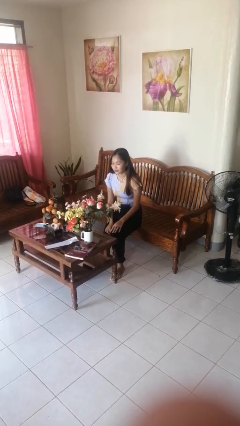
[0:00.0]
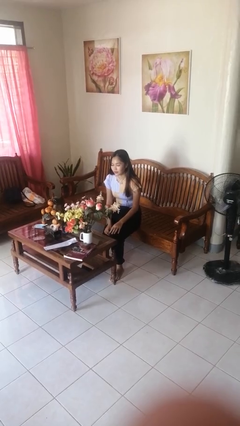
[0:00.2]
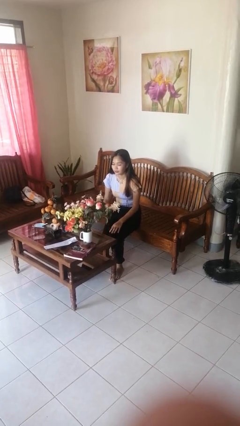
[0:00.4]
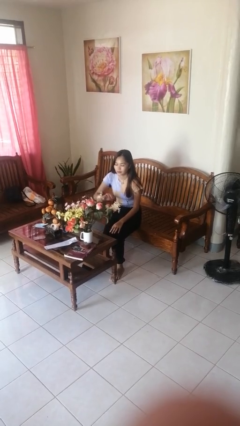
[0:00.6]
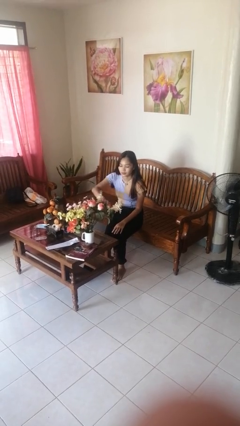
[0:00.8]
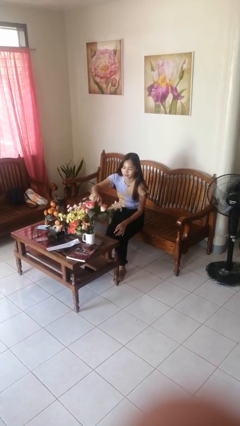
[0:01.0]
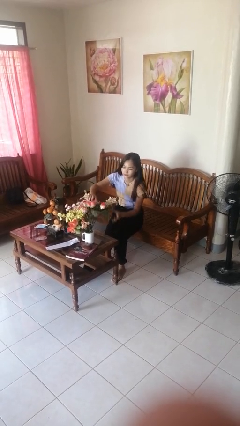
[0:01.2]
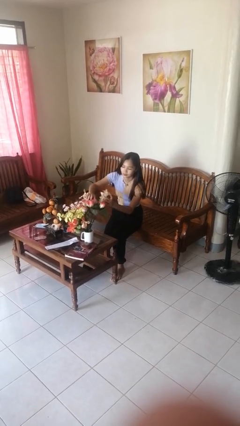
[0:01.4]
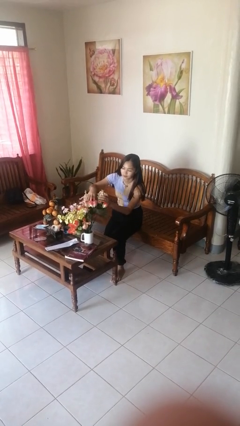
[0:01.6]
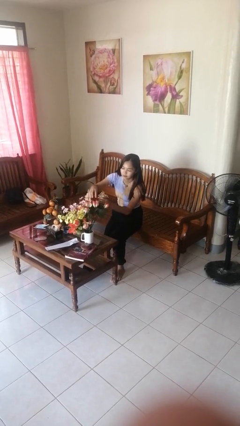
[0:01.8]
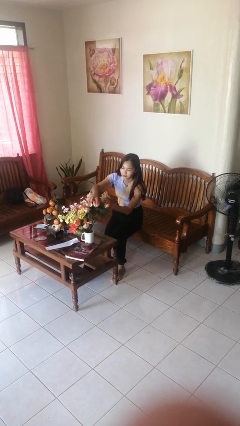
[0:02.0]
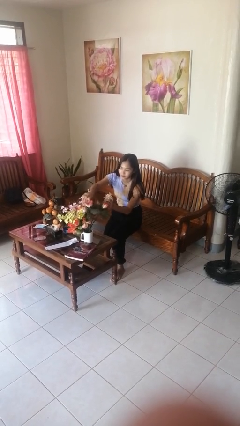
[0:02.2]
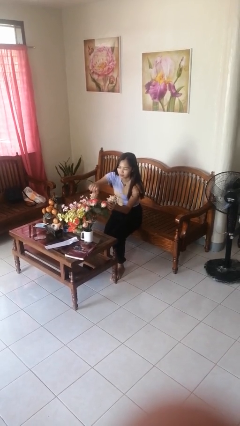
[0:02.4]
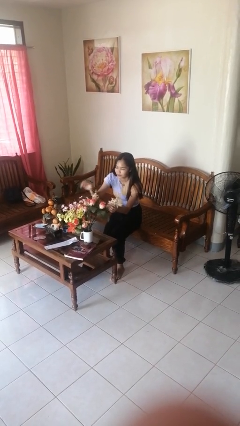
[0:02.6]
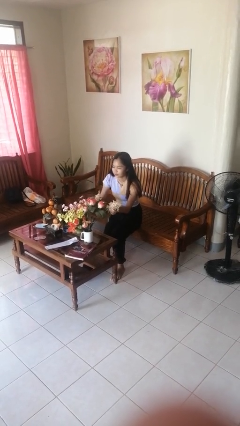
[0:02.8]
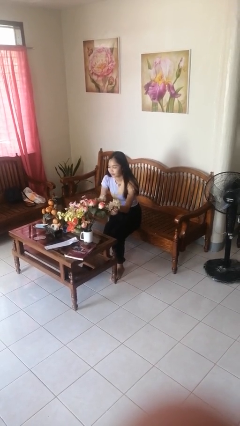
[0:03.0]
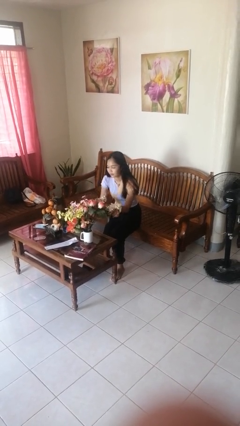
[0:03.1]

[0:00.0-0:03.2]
person arranges flowers in vase

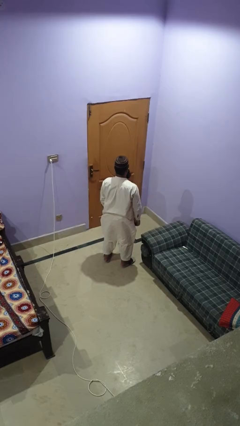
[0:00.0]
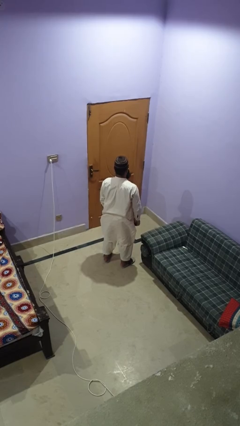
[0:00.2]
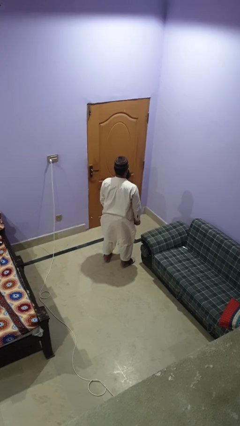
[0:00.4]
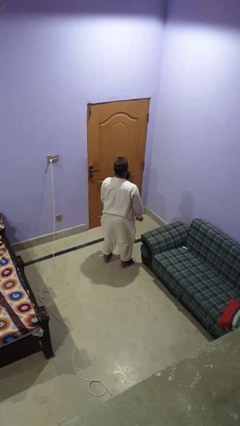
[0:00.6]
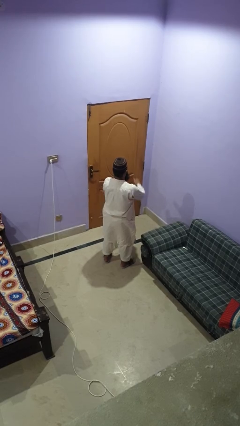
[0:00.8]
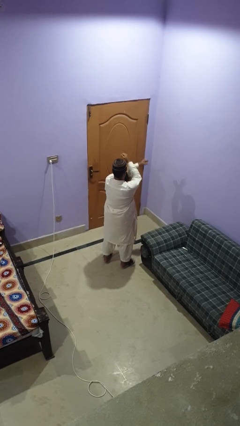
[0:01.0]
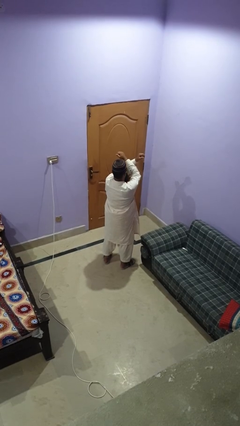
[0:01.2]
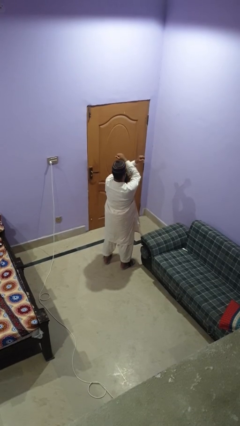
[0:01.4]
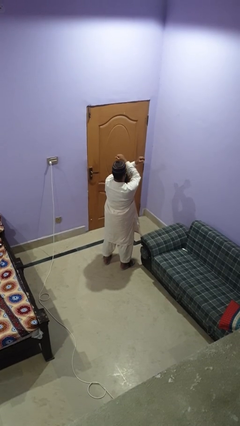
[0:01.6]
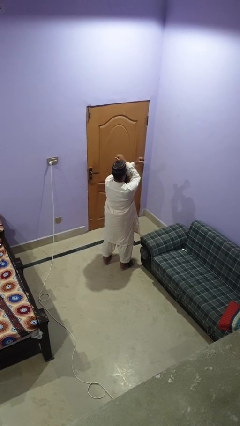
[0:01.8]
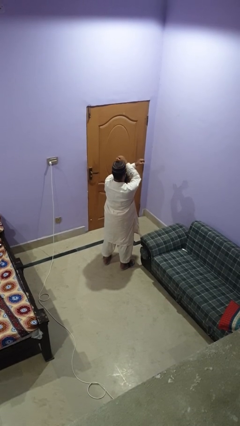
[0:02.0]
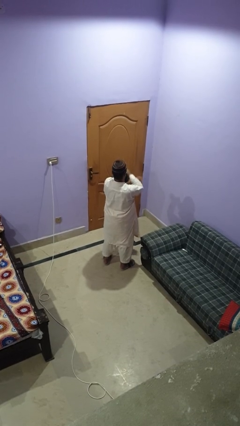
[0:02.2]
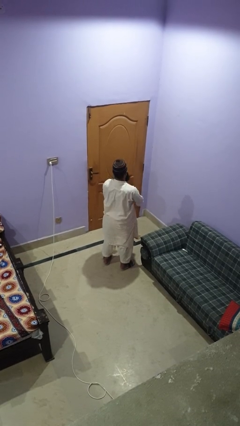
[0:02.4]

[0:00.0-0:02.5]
person gestures arms x

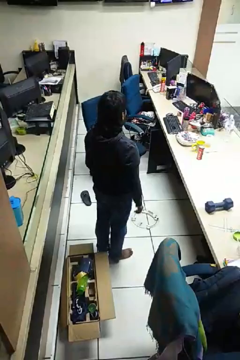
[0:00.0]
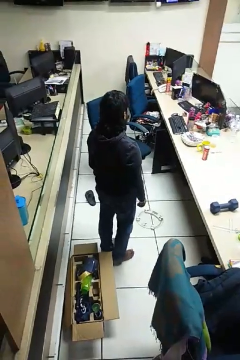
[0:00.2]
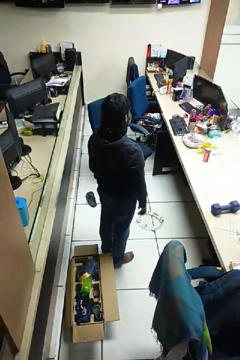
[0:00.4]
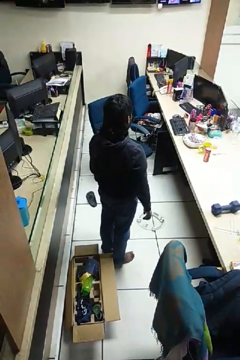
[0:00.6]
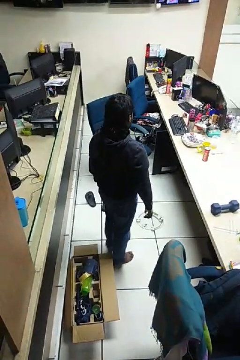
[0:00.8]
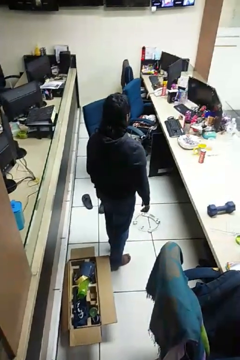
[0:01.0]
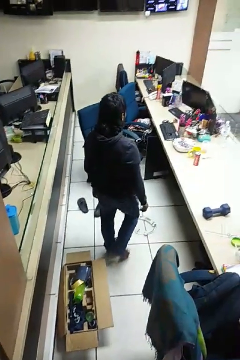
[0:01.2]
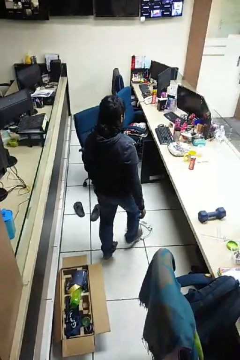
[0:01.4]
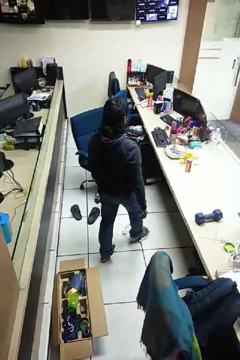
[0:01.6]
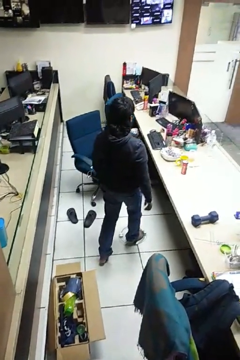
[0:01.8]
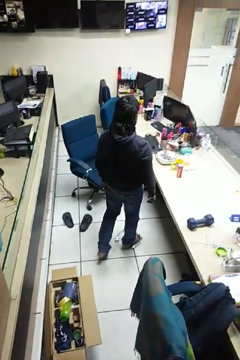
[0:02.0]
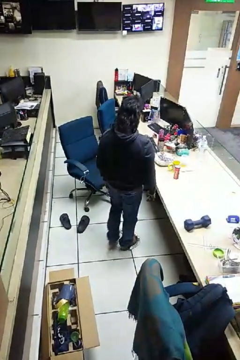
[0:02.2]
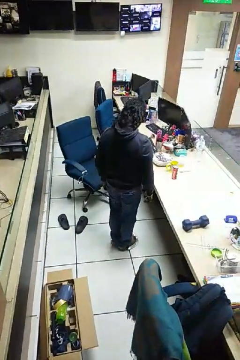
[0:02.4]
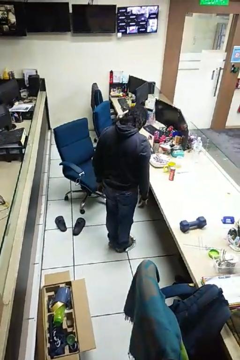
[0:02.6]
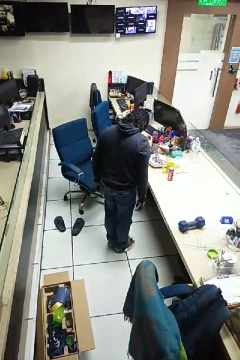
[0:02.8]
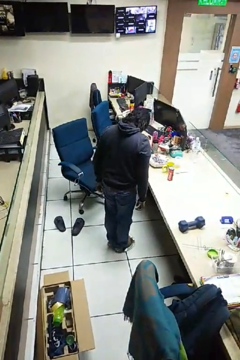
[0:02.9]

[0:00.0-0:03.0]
person uses bodyweight scale

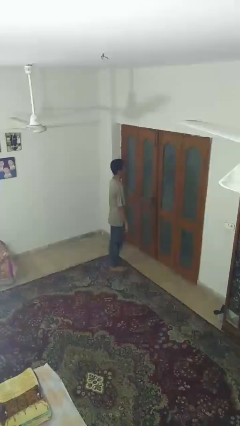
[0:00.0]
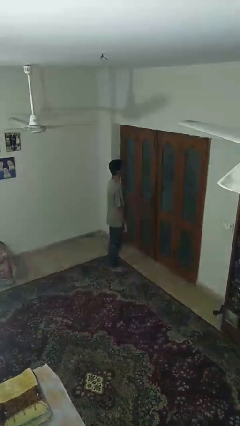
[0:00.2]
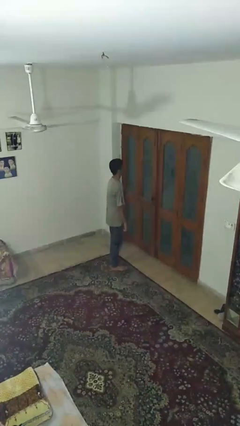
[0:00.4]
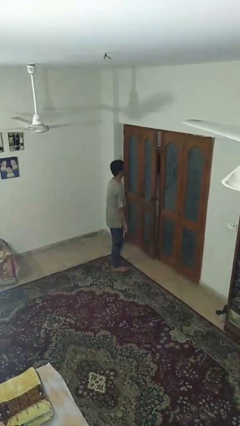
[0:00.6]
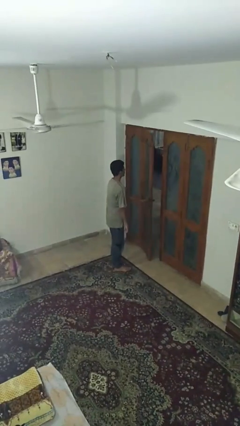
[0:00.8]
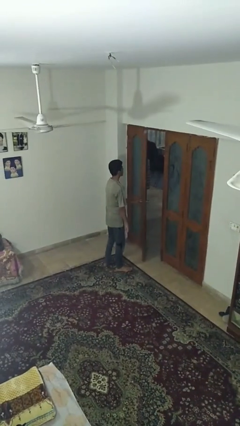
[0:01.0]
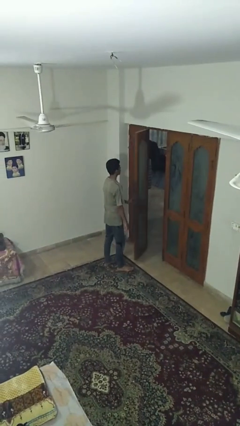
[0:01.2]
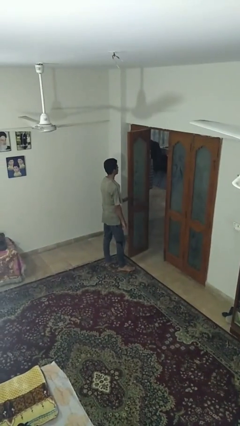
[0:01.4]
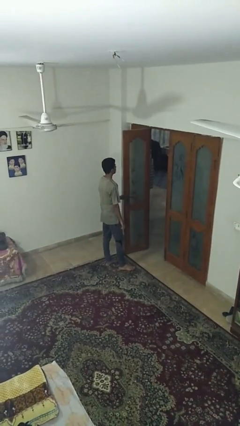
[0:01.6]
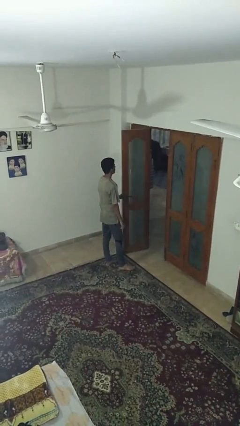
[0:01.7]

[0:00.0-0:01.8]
person opens facility door

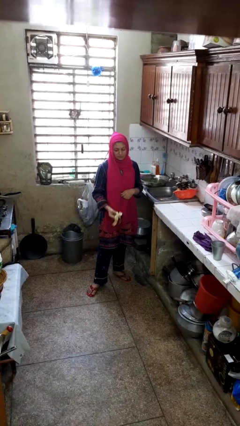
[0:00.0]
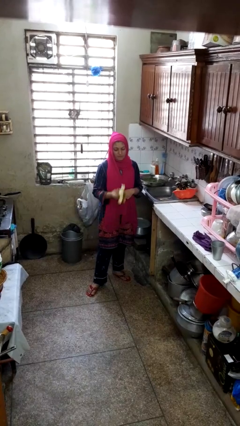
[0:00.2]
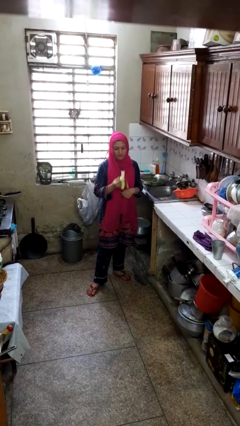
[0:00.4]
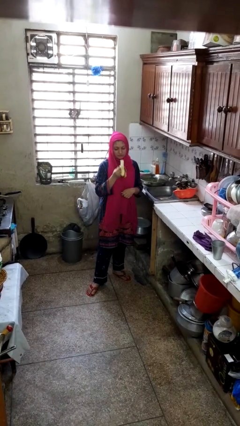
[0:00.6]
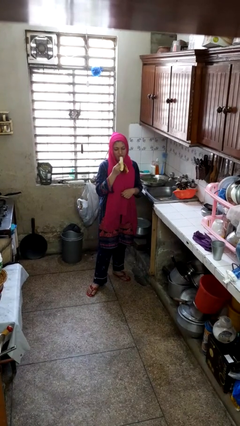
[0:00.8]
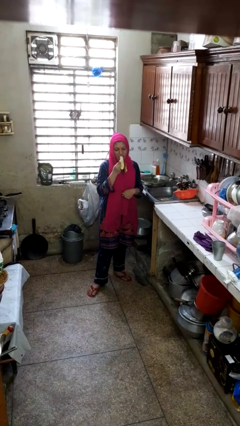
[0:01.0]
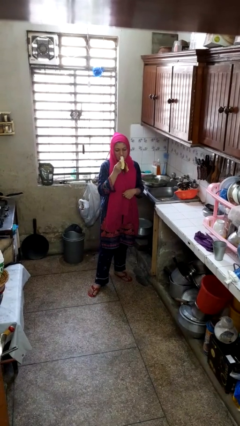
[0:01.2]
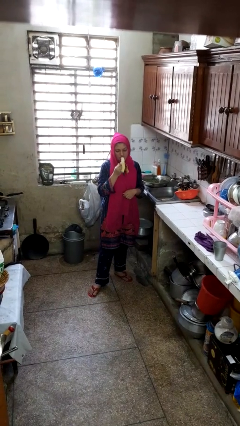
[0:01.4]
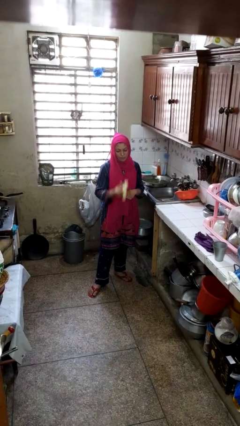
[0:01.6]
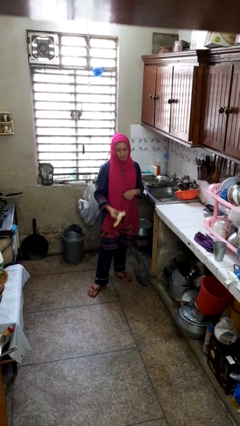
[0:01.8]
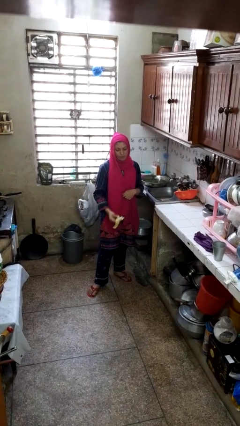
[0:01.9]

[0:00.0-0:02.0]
person eats banana

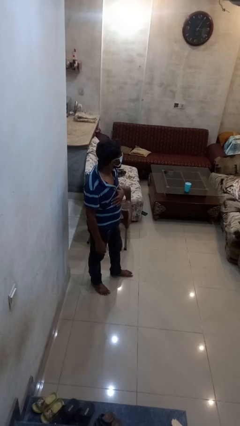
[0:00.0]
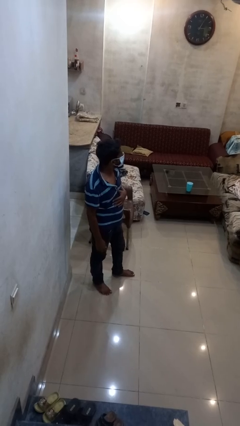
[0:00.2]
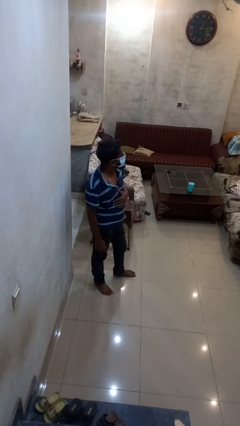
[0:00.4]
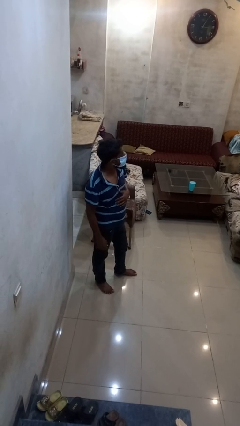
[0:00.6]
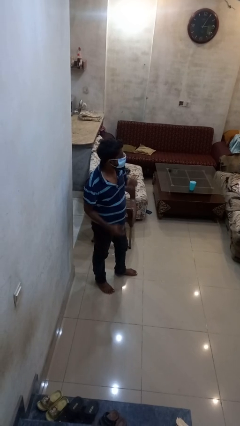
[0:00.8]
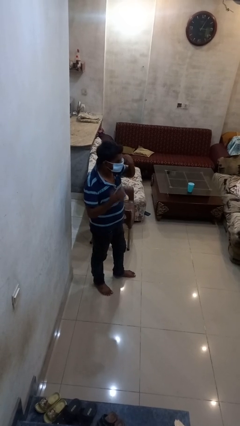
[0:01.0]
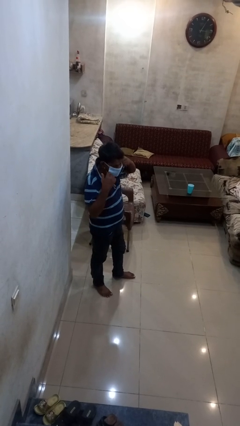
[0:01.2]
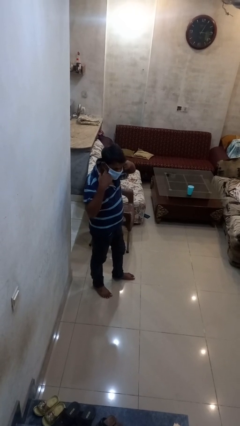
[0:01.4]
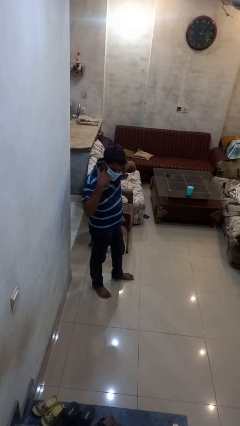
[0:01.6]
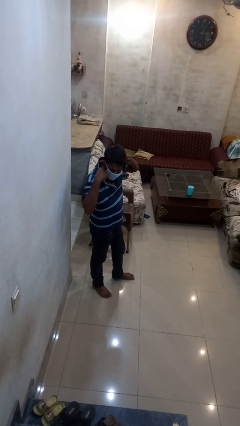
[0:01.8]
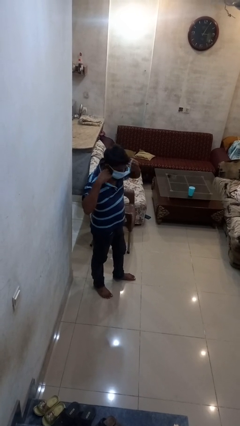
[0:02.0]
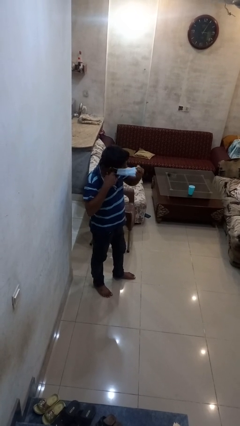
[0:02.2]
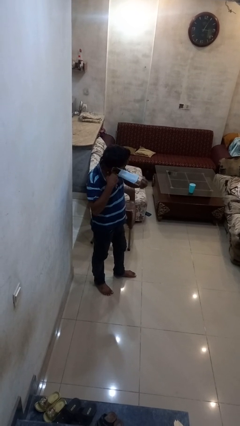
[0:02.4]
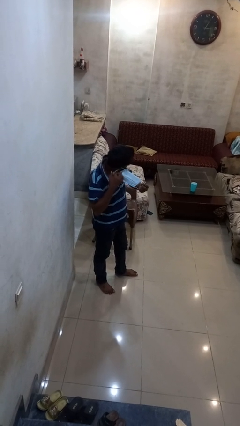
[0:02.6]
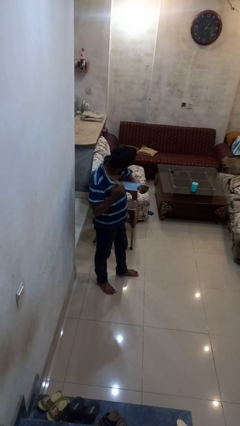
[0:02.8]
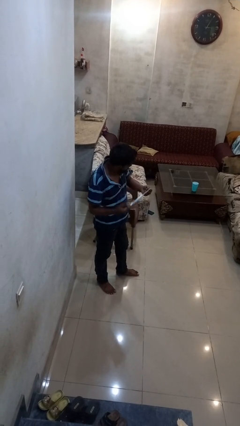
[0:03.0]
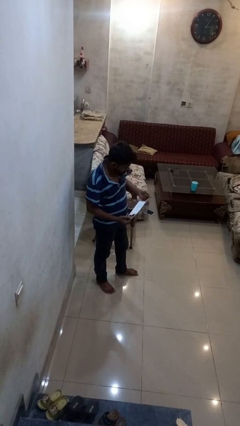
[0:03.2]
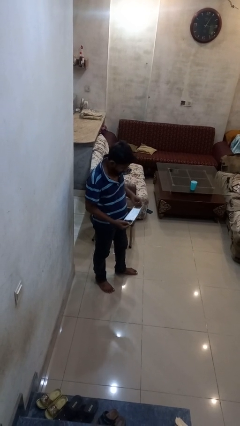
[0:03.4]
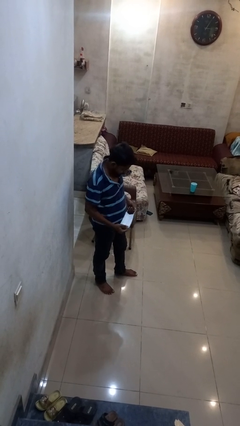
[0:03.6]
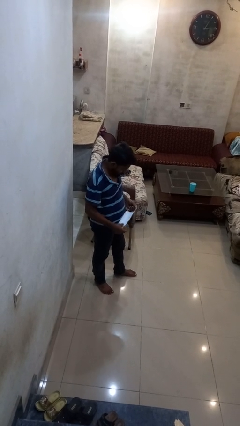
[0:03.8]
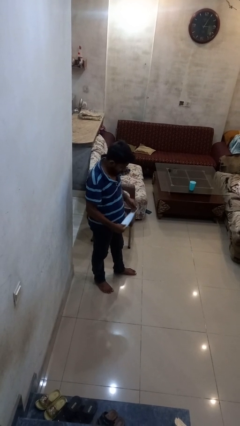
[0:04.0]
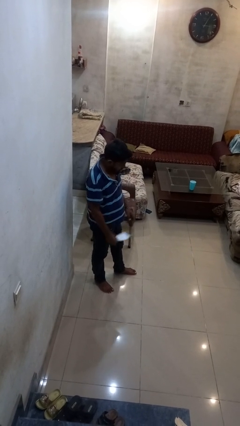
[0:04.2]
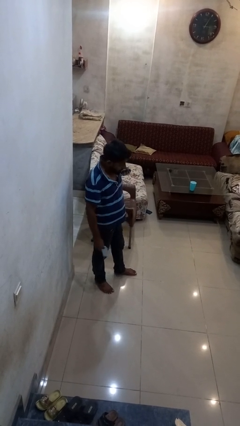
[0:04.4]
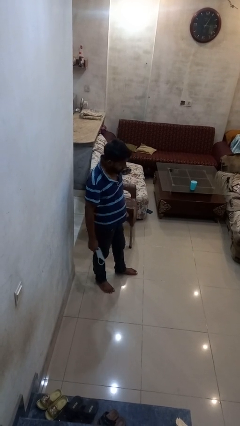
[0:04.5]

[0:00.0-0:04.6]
person takes off facemask

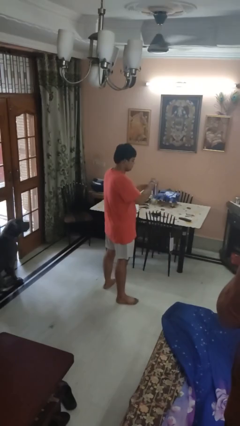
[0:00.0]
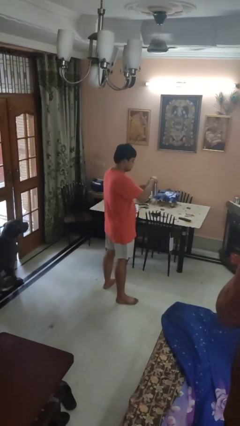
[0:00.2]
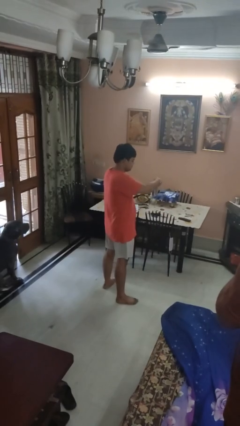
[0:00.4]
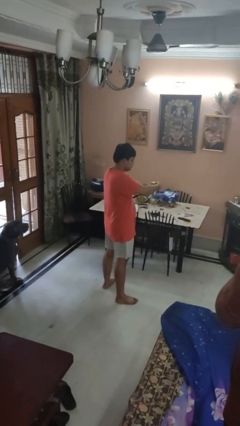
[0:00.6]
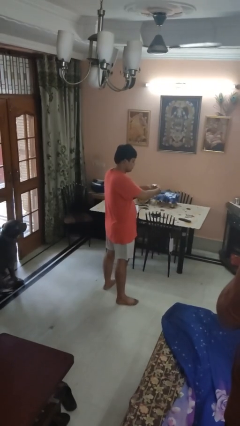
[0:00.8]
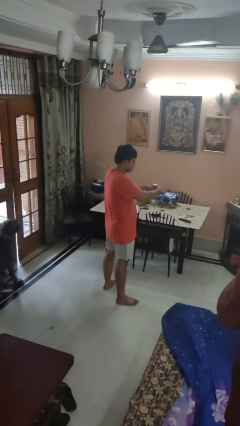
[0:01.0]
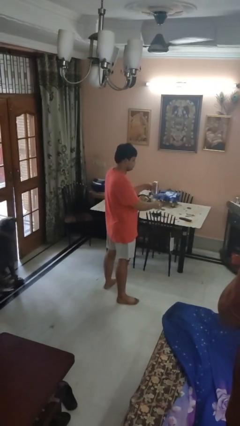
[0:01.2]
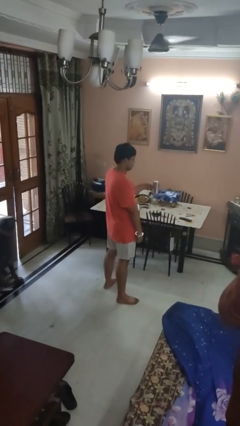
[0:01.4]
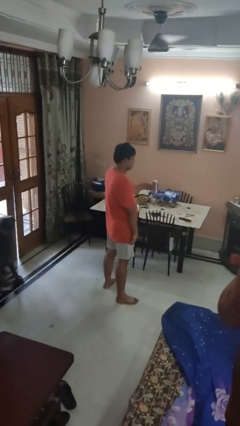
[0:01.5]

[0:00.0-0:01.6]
person opens beverage can
